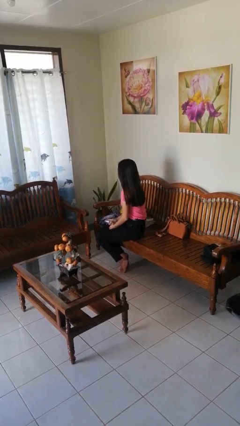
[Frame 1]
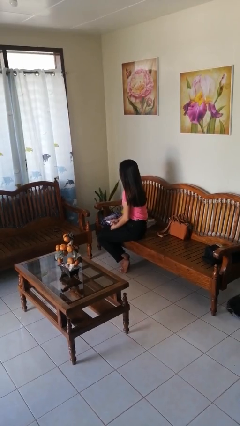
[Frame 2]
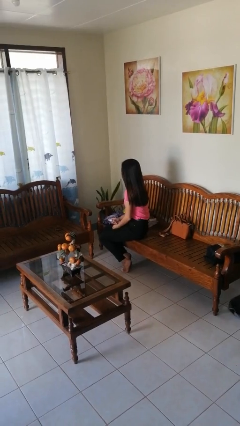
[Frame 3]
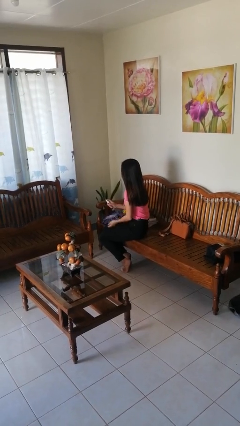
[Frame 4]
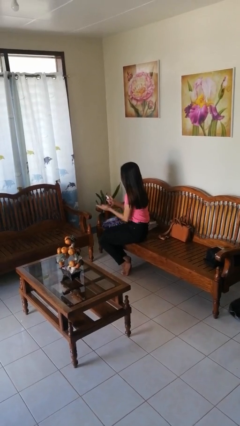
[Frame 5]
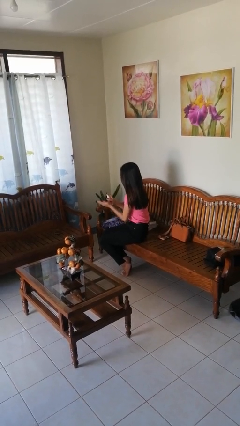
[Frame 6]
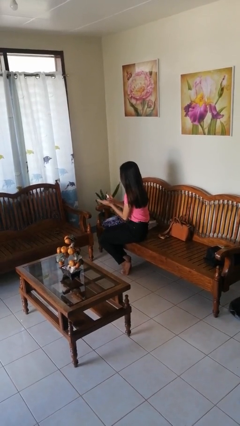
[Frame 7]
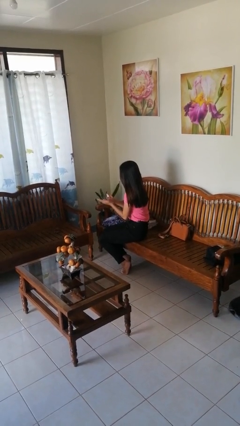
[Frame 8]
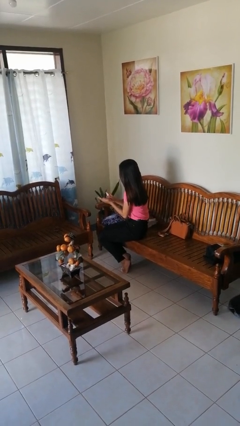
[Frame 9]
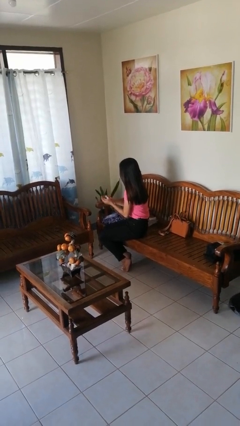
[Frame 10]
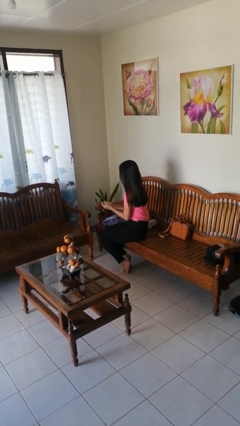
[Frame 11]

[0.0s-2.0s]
person sprays from bottle

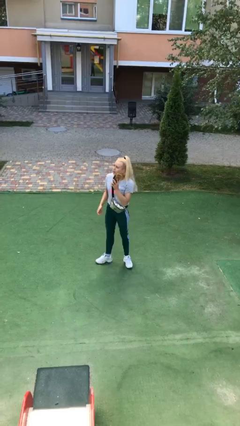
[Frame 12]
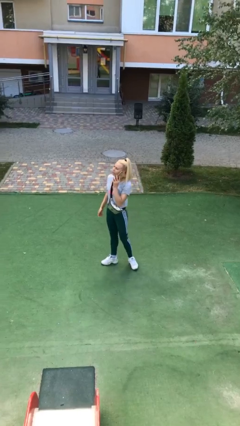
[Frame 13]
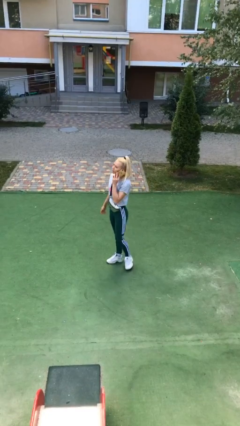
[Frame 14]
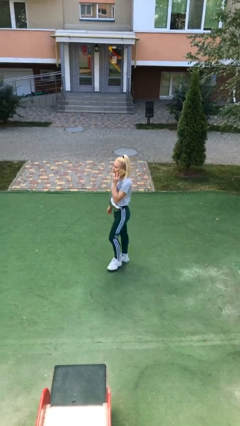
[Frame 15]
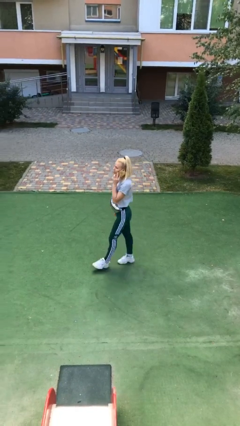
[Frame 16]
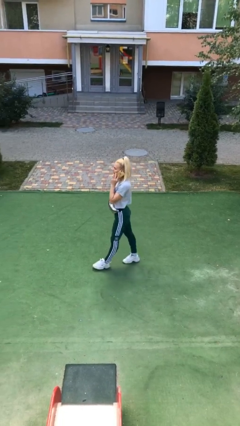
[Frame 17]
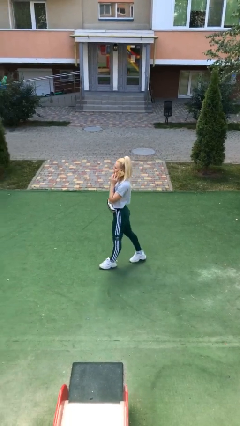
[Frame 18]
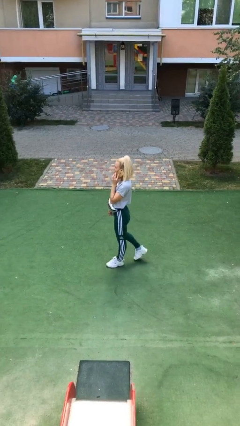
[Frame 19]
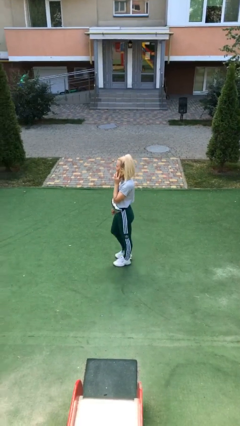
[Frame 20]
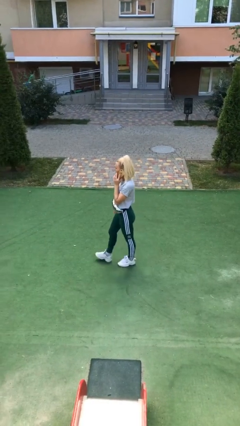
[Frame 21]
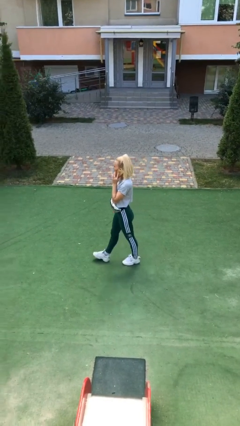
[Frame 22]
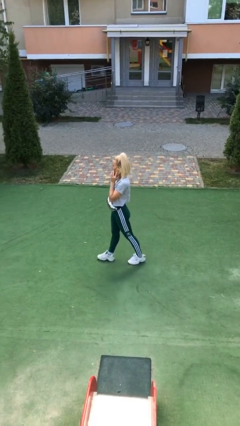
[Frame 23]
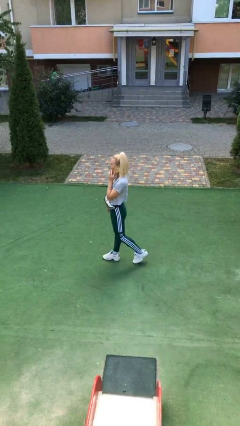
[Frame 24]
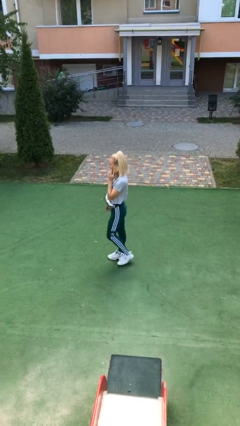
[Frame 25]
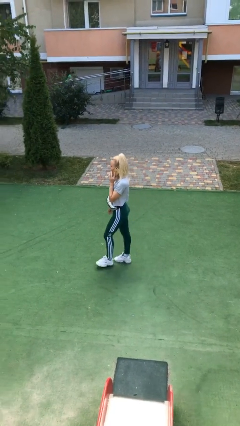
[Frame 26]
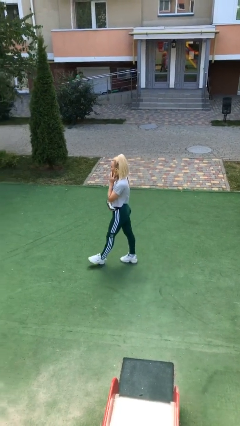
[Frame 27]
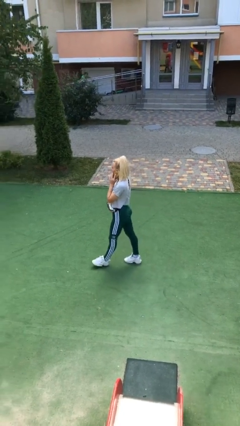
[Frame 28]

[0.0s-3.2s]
person talks on phone

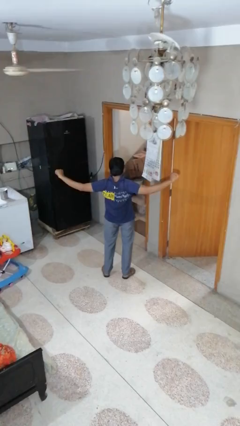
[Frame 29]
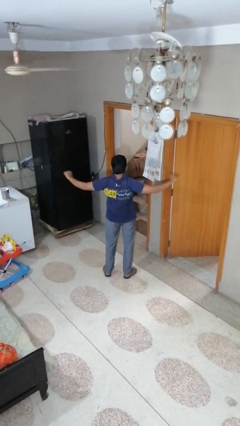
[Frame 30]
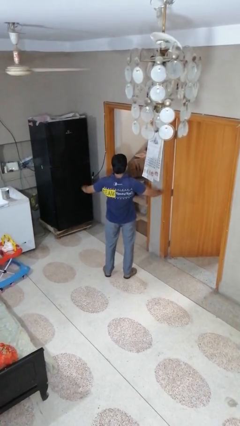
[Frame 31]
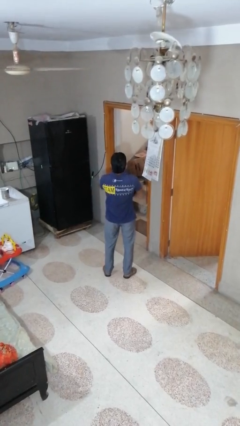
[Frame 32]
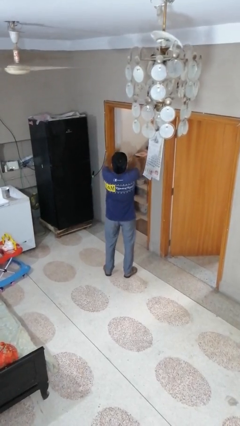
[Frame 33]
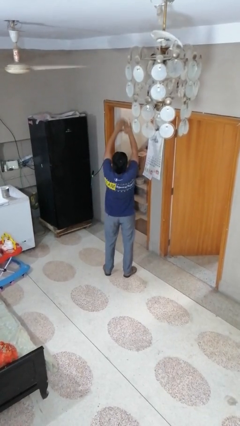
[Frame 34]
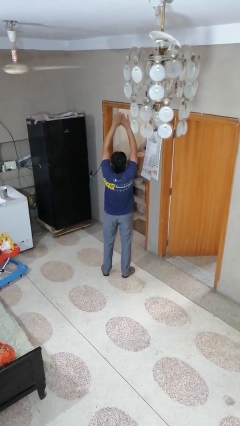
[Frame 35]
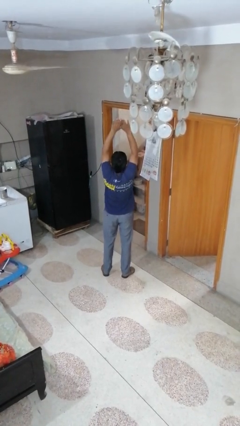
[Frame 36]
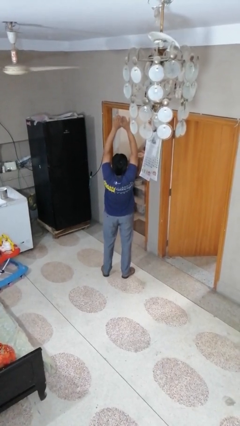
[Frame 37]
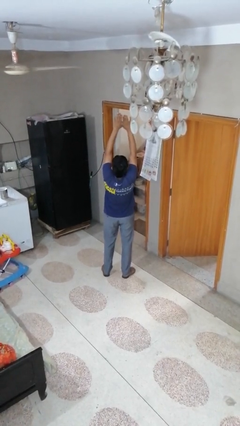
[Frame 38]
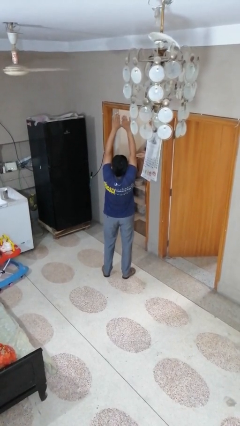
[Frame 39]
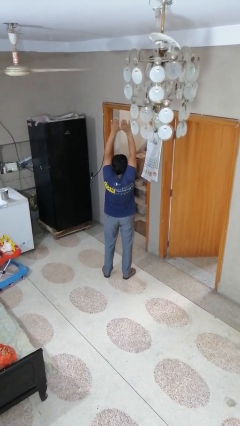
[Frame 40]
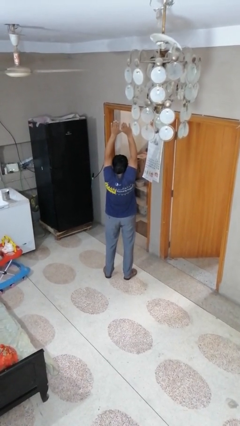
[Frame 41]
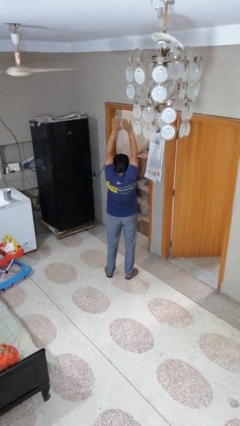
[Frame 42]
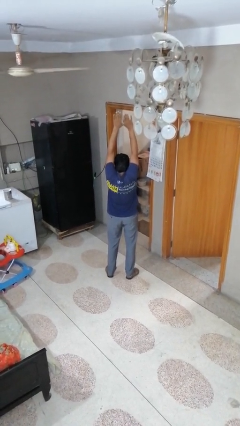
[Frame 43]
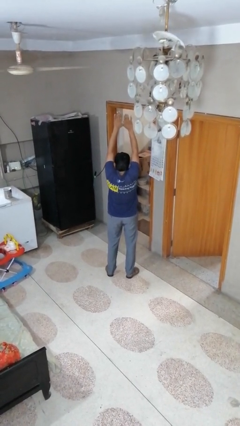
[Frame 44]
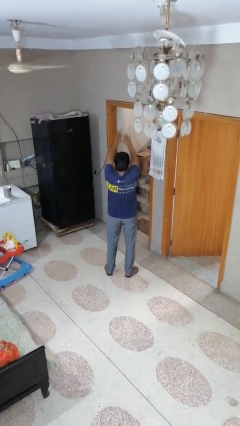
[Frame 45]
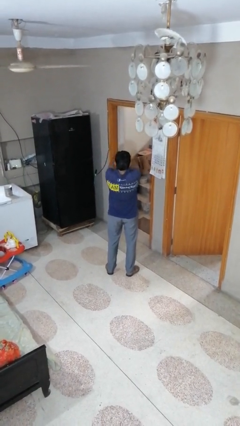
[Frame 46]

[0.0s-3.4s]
person stretches arms over head

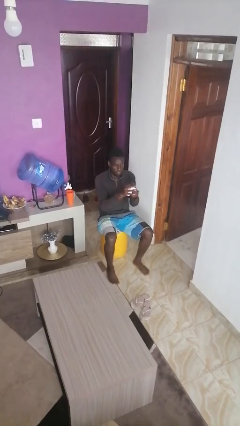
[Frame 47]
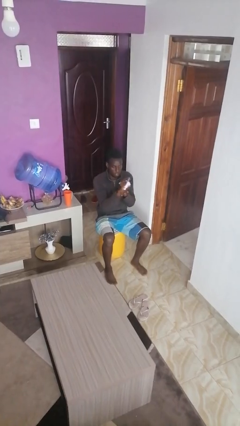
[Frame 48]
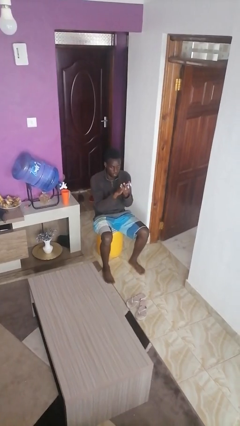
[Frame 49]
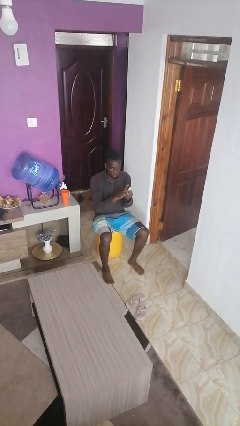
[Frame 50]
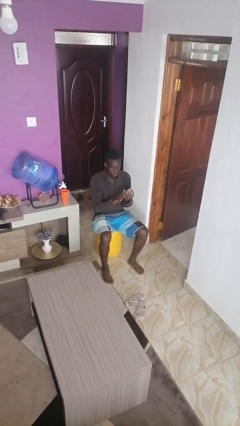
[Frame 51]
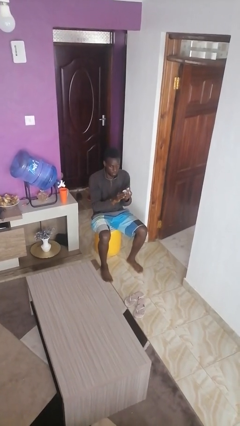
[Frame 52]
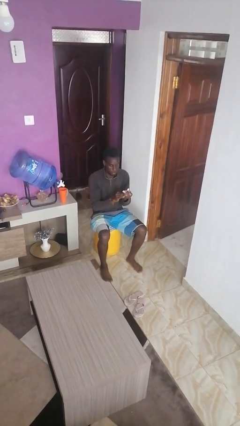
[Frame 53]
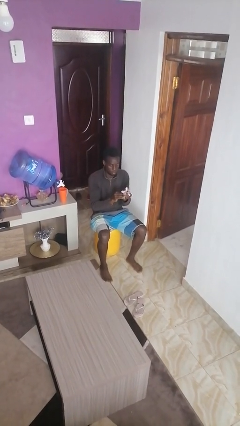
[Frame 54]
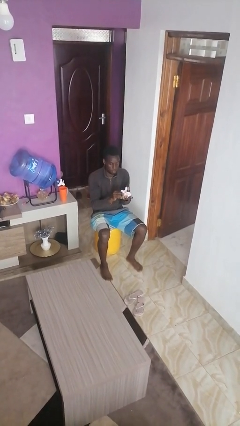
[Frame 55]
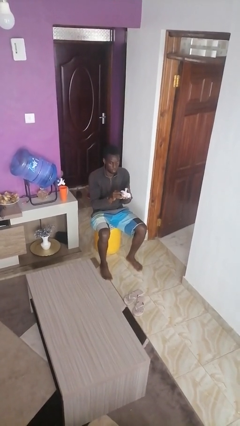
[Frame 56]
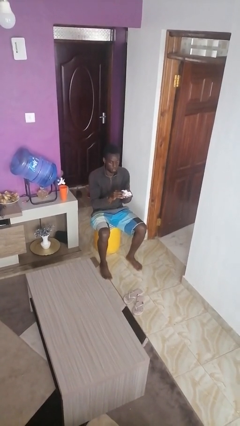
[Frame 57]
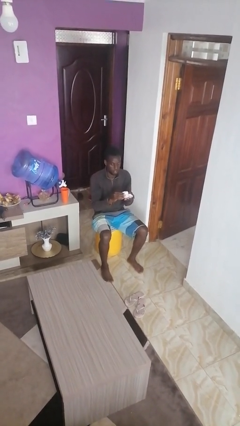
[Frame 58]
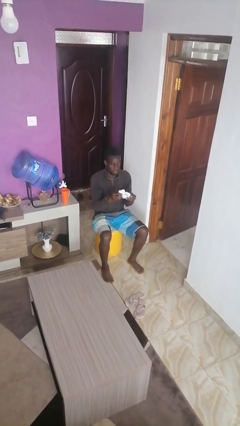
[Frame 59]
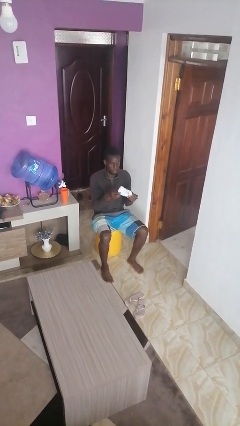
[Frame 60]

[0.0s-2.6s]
person crumples paper

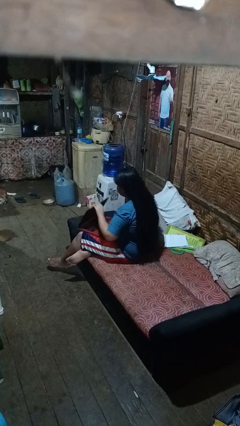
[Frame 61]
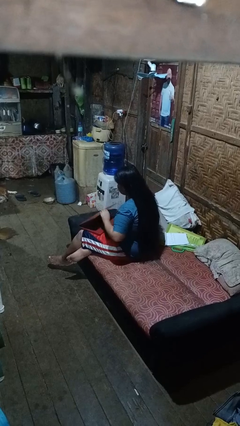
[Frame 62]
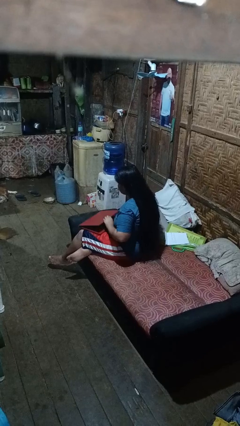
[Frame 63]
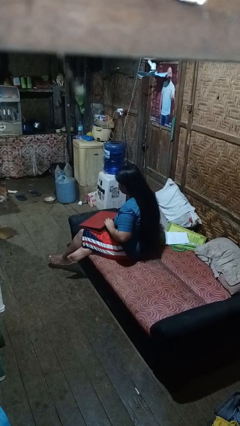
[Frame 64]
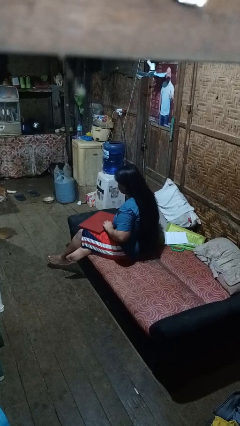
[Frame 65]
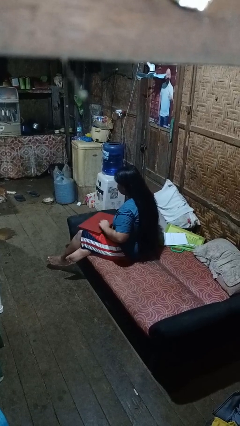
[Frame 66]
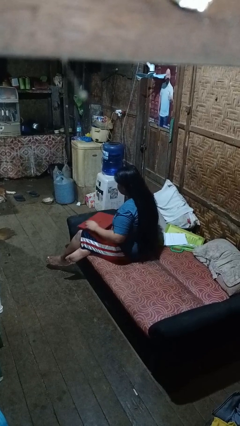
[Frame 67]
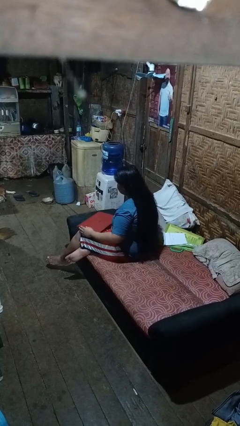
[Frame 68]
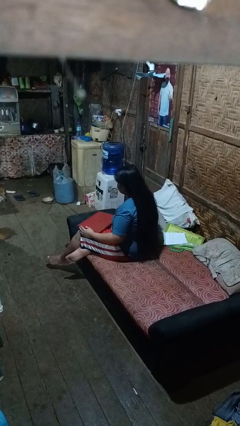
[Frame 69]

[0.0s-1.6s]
person closes laptop

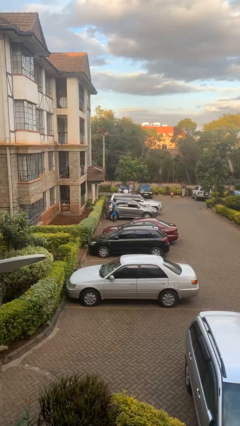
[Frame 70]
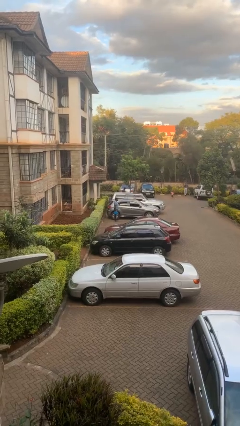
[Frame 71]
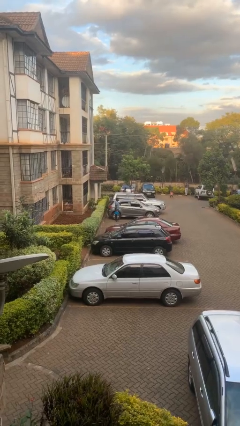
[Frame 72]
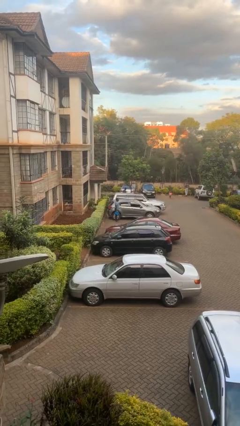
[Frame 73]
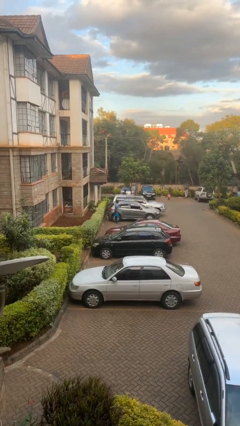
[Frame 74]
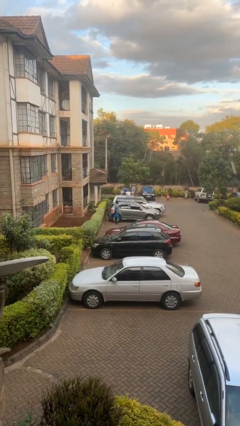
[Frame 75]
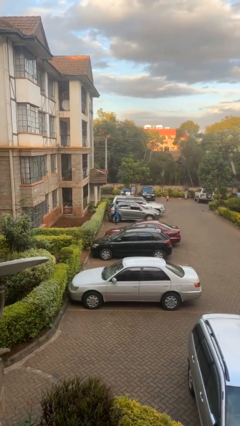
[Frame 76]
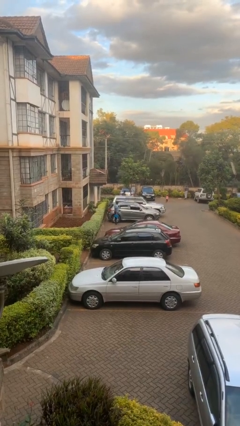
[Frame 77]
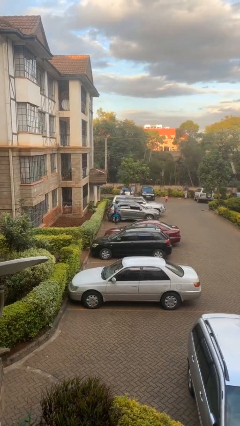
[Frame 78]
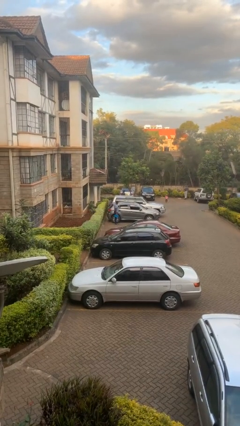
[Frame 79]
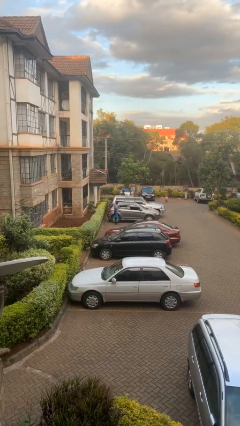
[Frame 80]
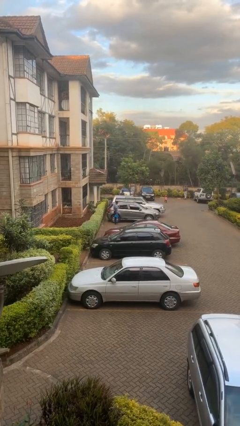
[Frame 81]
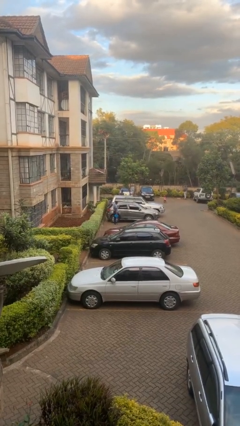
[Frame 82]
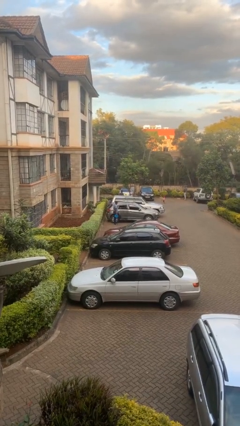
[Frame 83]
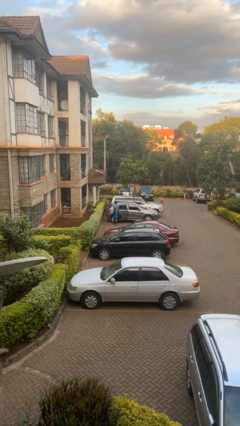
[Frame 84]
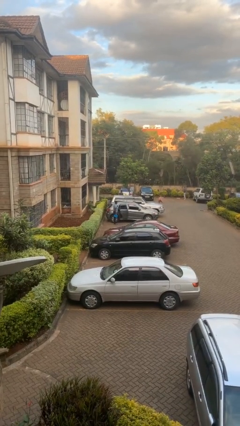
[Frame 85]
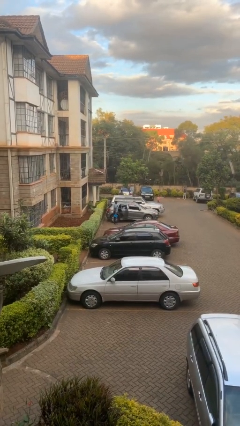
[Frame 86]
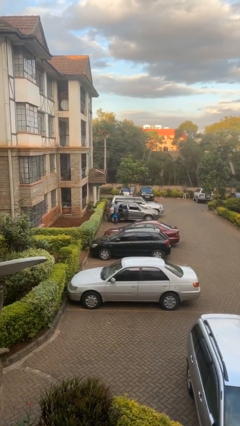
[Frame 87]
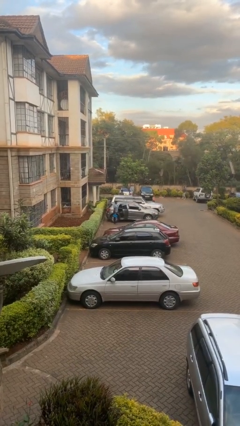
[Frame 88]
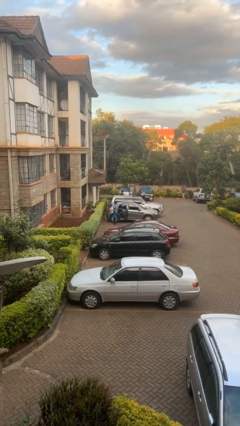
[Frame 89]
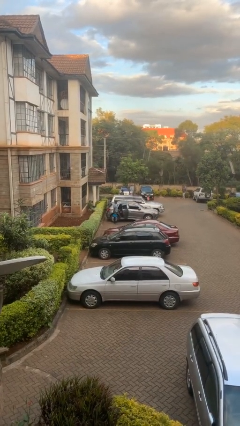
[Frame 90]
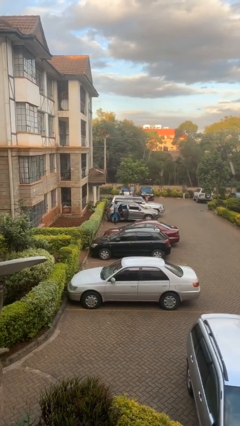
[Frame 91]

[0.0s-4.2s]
person opens car door

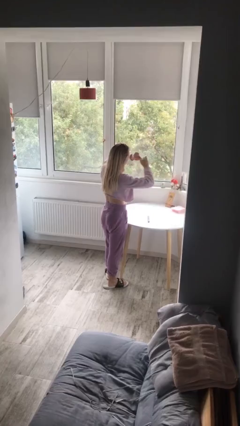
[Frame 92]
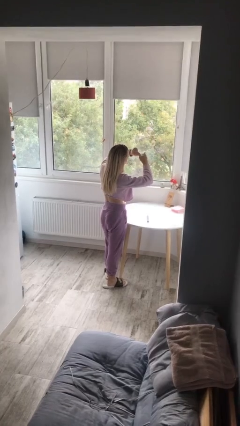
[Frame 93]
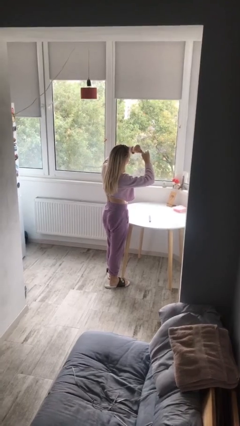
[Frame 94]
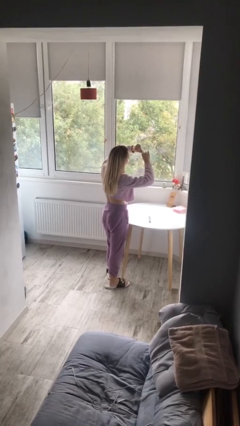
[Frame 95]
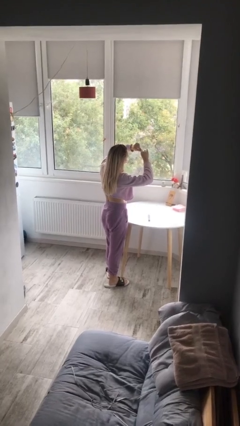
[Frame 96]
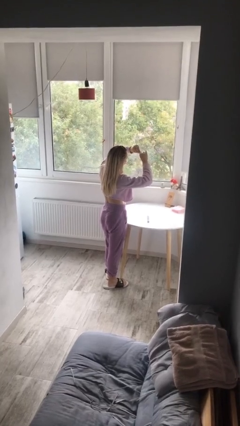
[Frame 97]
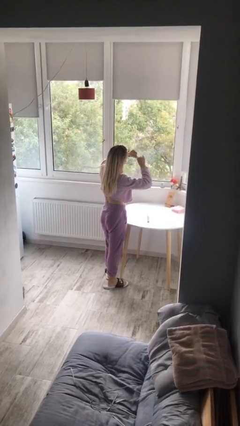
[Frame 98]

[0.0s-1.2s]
person clips fingernails
